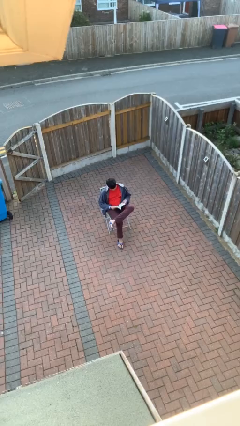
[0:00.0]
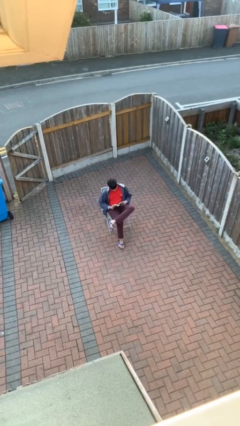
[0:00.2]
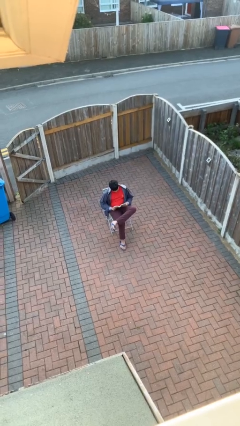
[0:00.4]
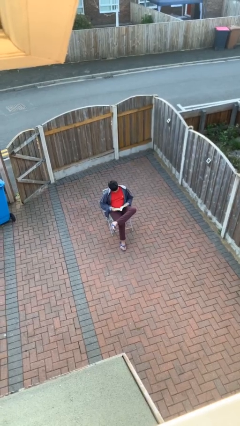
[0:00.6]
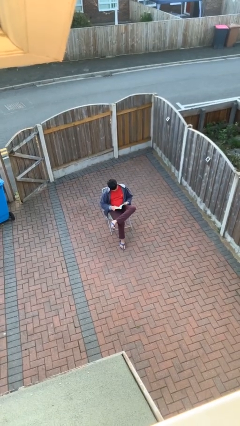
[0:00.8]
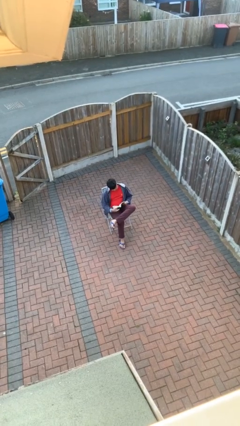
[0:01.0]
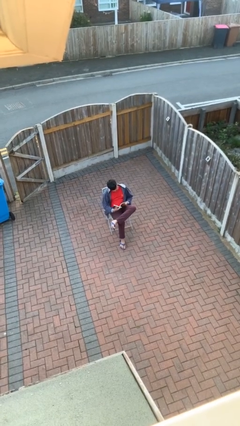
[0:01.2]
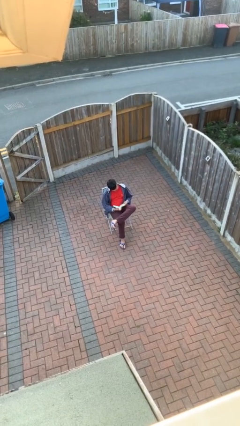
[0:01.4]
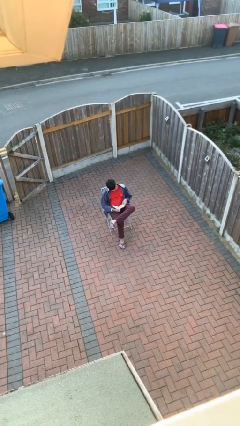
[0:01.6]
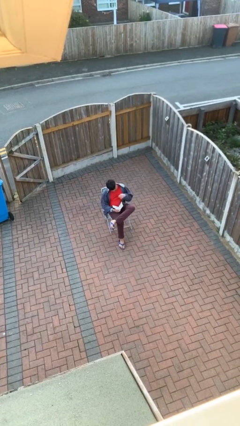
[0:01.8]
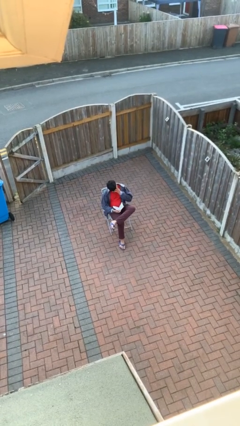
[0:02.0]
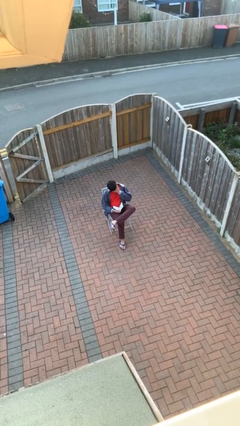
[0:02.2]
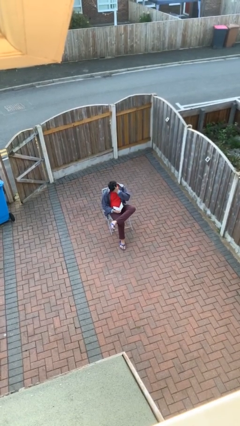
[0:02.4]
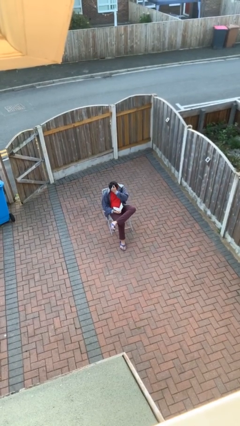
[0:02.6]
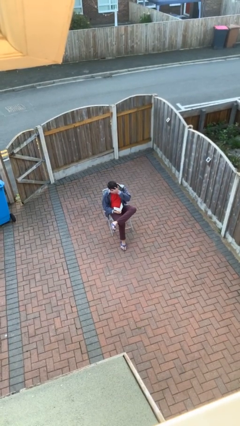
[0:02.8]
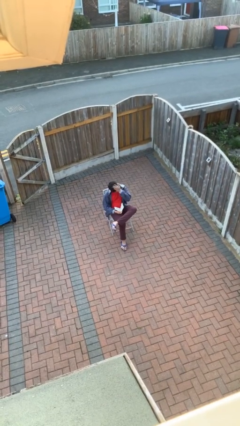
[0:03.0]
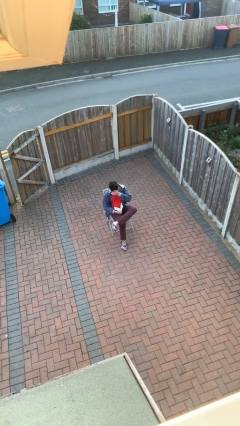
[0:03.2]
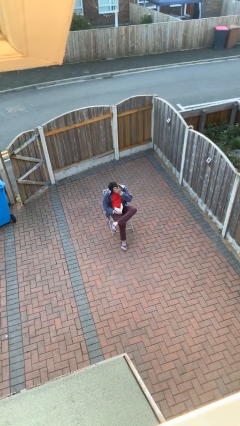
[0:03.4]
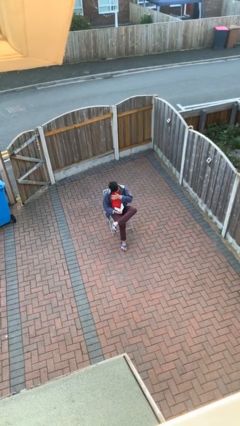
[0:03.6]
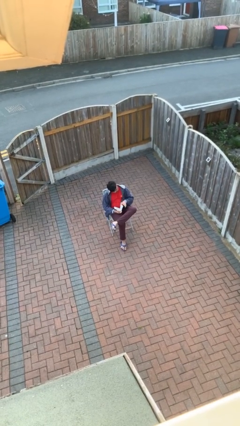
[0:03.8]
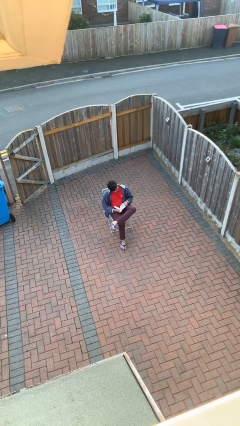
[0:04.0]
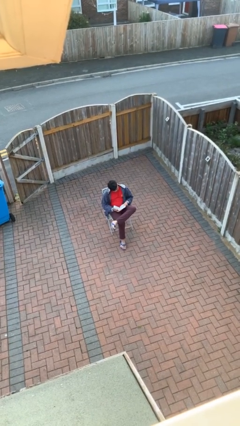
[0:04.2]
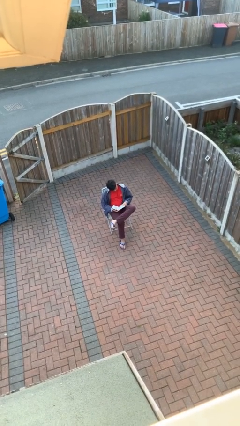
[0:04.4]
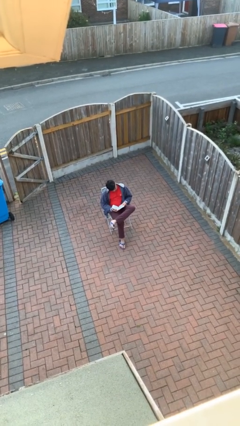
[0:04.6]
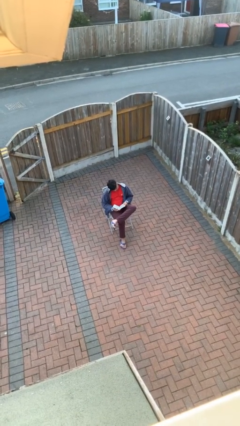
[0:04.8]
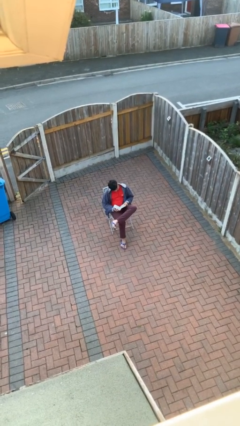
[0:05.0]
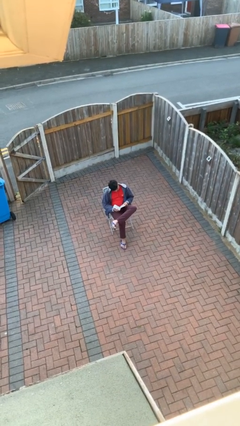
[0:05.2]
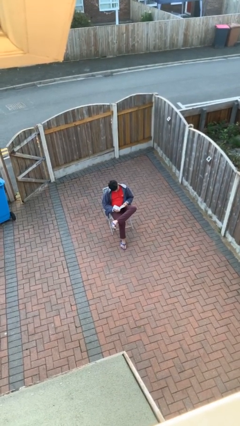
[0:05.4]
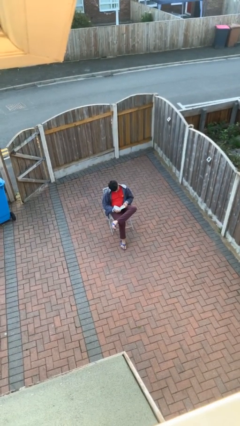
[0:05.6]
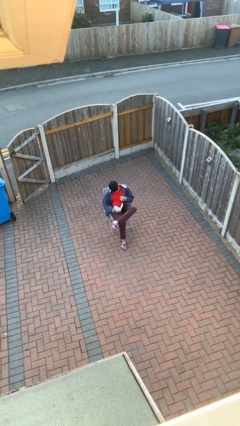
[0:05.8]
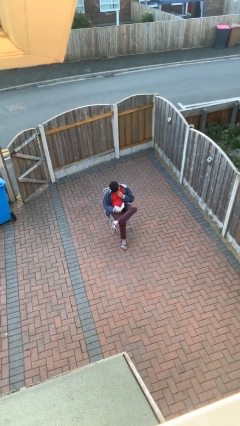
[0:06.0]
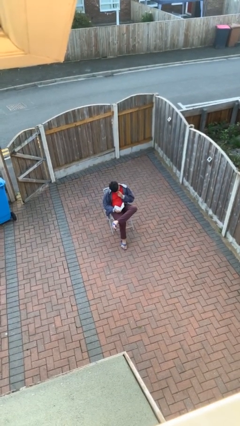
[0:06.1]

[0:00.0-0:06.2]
person reads document

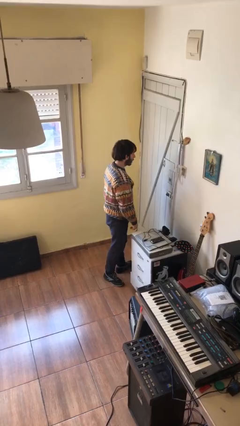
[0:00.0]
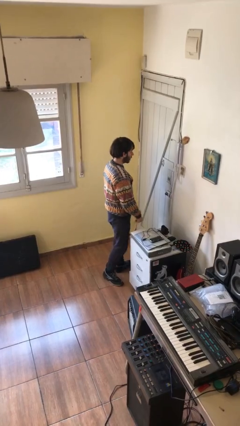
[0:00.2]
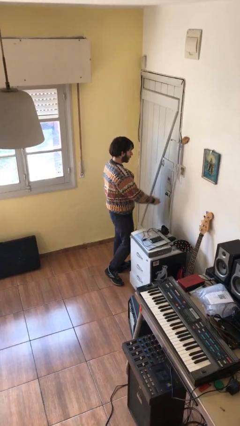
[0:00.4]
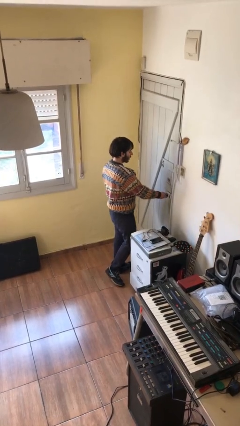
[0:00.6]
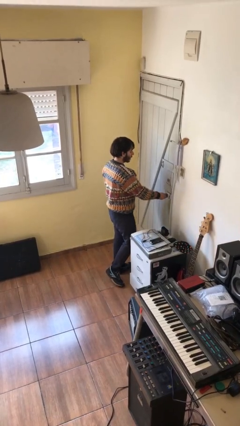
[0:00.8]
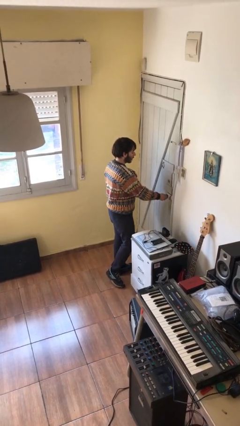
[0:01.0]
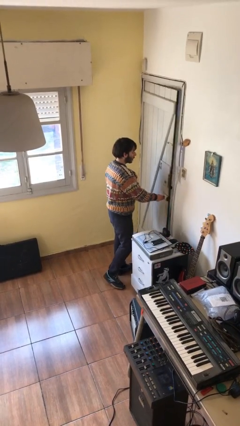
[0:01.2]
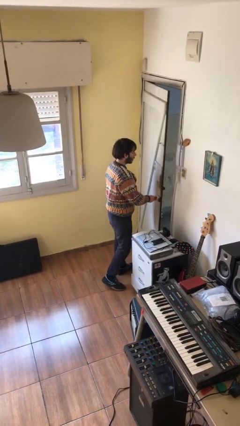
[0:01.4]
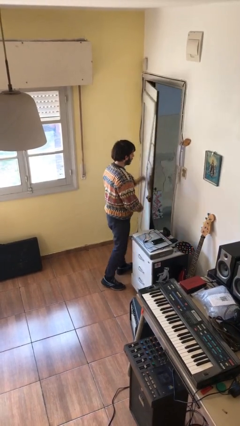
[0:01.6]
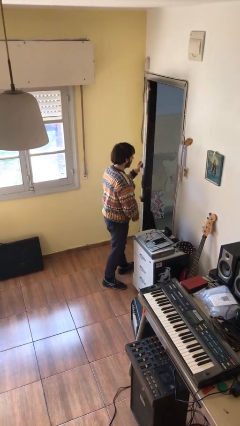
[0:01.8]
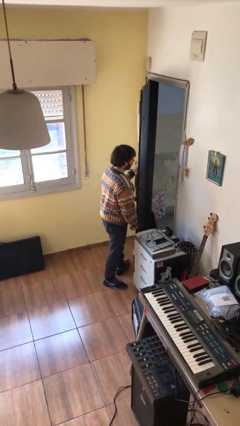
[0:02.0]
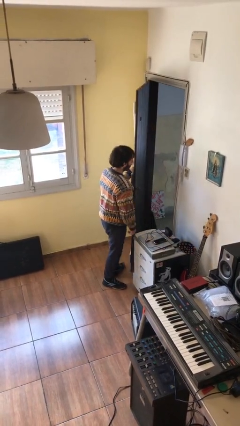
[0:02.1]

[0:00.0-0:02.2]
person opens facility door

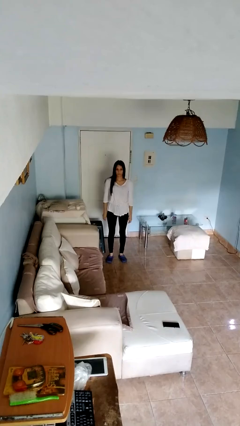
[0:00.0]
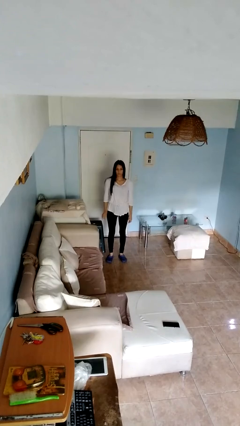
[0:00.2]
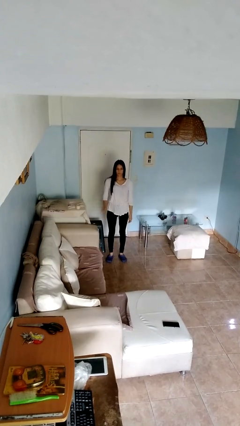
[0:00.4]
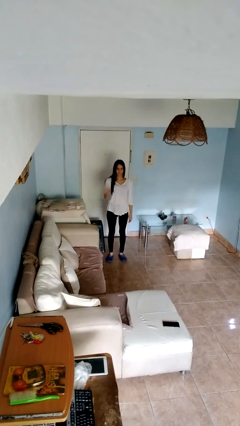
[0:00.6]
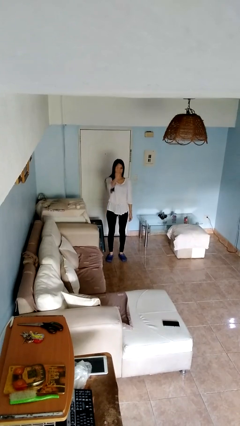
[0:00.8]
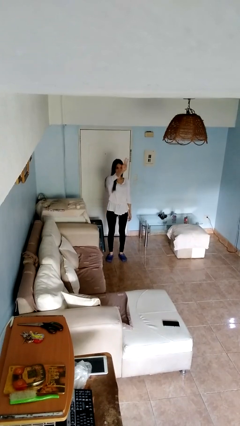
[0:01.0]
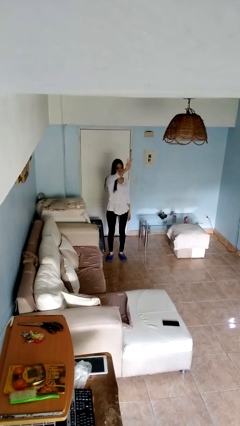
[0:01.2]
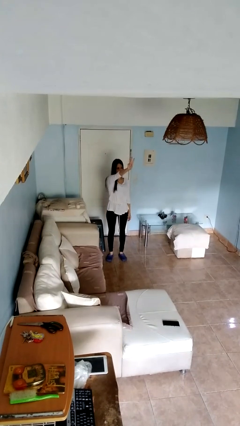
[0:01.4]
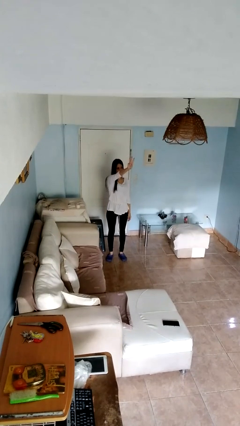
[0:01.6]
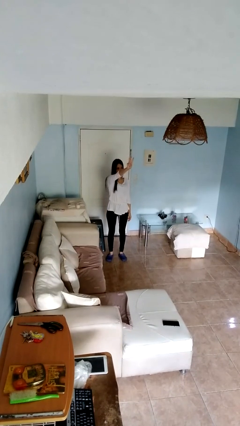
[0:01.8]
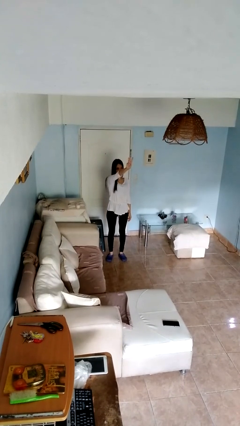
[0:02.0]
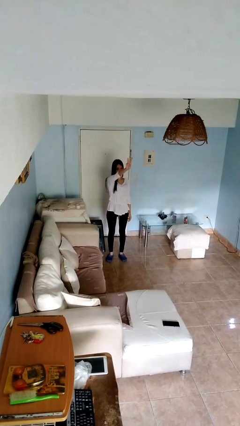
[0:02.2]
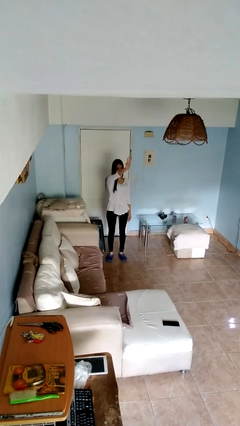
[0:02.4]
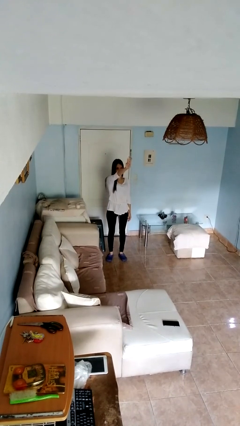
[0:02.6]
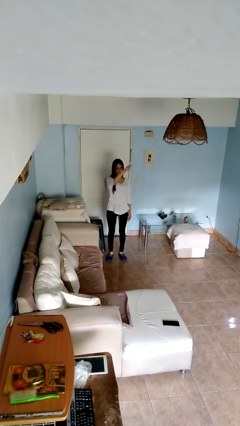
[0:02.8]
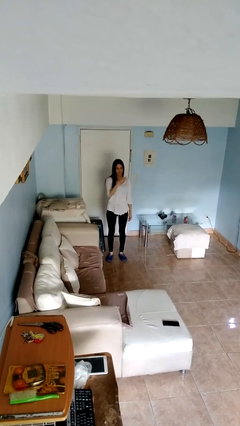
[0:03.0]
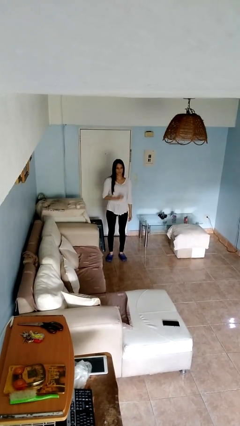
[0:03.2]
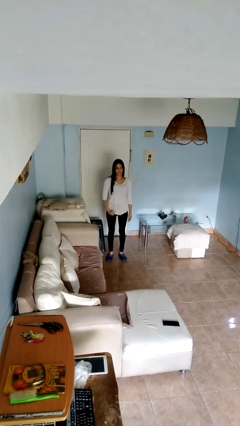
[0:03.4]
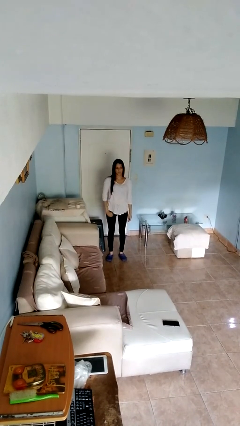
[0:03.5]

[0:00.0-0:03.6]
person gestures number three

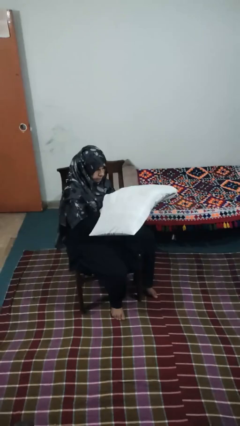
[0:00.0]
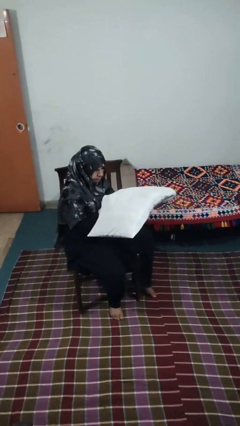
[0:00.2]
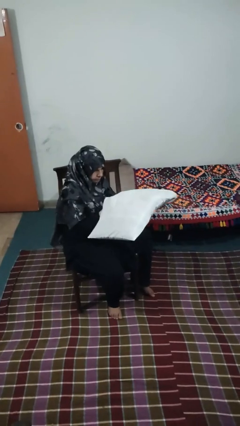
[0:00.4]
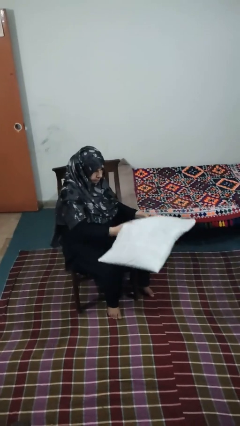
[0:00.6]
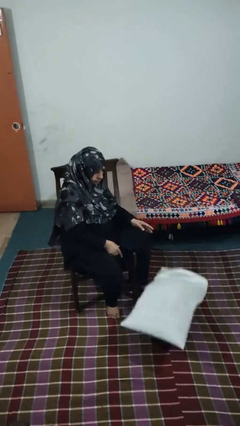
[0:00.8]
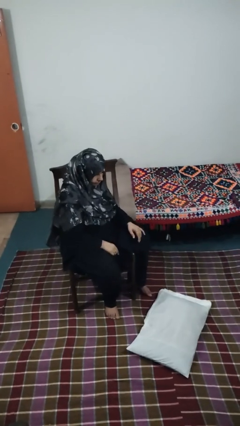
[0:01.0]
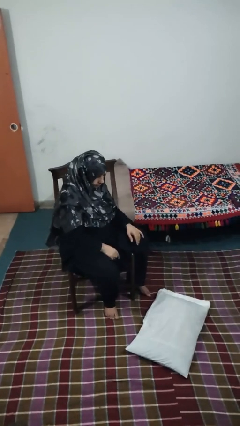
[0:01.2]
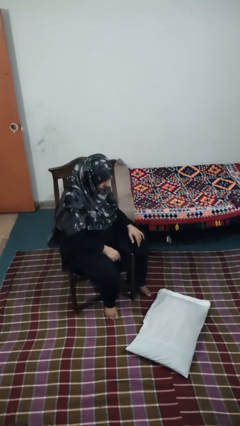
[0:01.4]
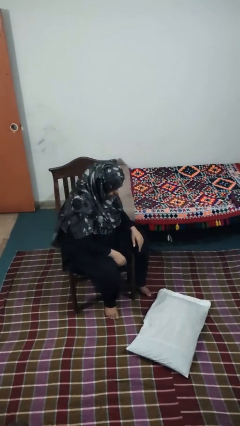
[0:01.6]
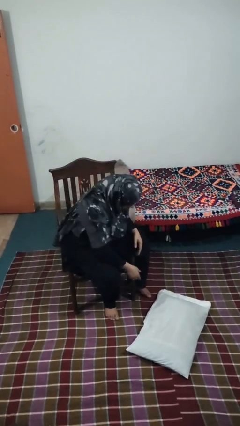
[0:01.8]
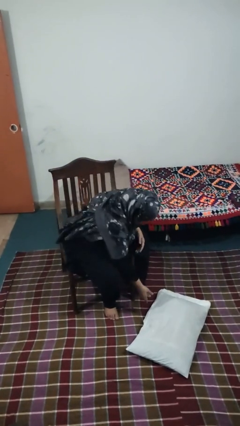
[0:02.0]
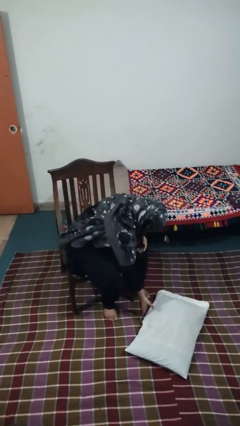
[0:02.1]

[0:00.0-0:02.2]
person drops object

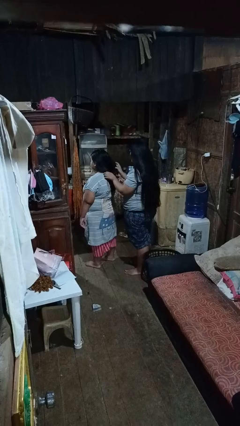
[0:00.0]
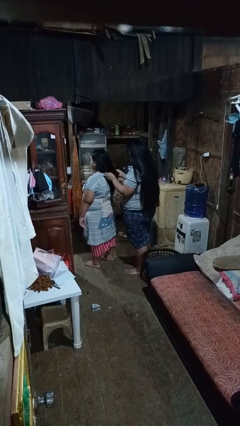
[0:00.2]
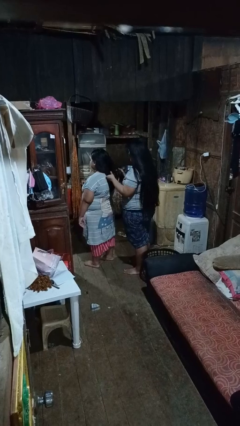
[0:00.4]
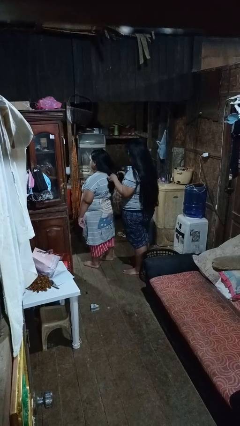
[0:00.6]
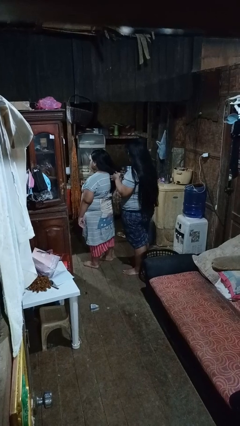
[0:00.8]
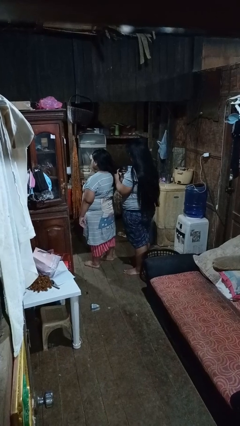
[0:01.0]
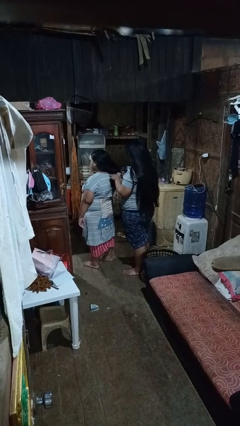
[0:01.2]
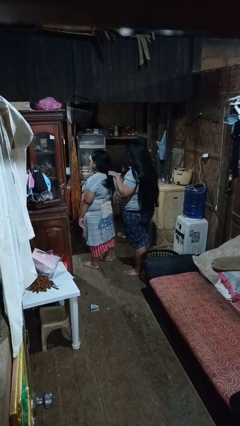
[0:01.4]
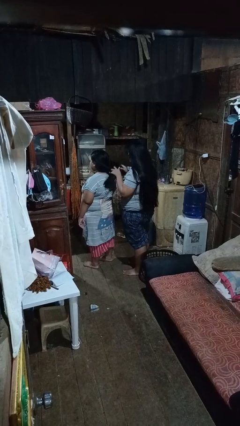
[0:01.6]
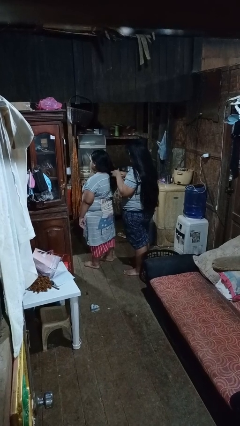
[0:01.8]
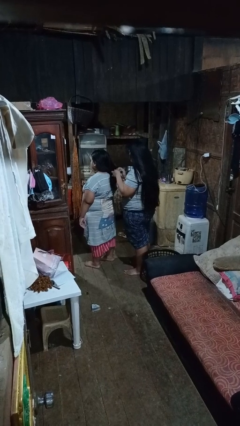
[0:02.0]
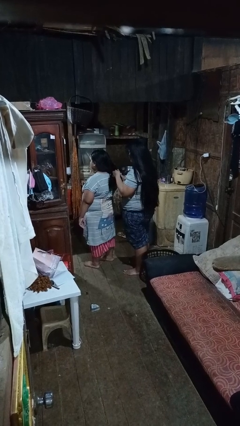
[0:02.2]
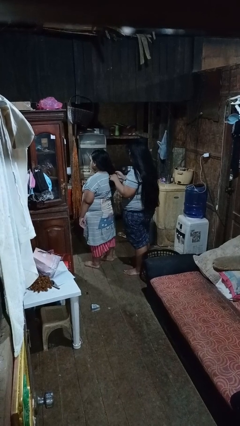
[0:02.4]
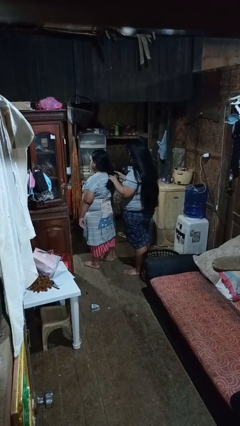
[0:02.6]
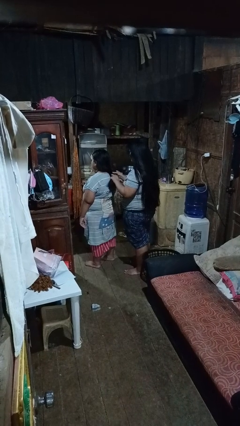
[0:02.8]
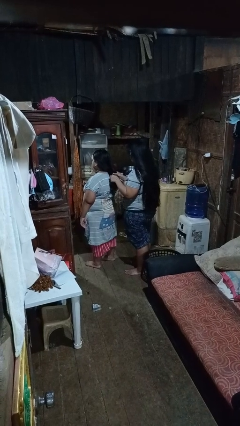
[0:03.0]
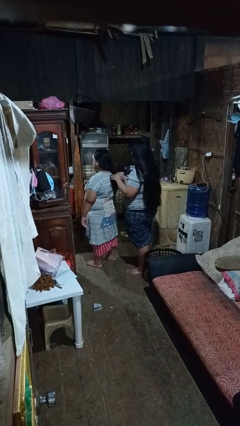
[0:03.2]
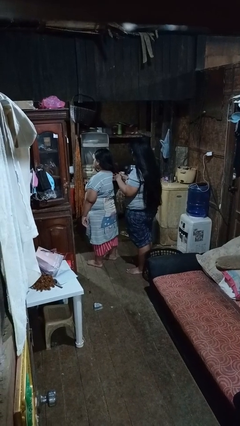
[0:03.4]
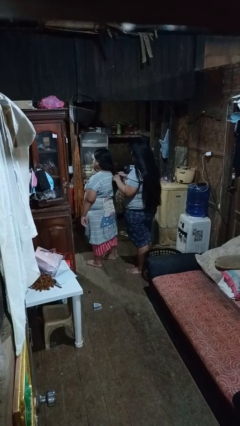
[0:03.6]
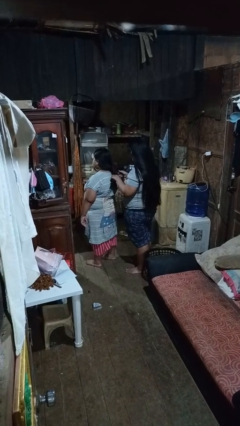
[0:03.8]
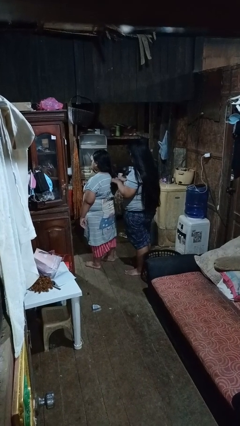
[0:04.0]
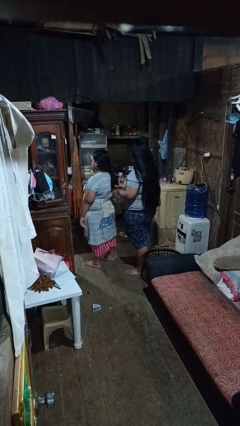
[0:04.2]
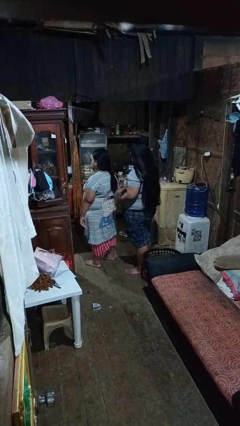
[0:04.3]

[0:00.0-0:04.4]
person braids hair of person
